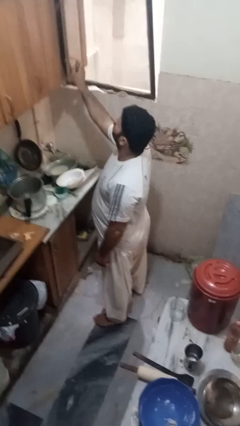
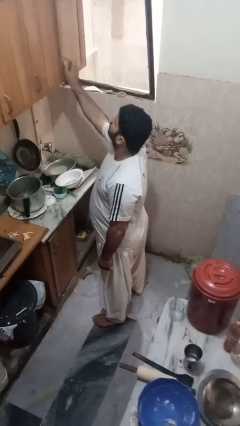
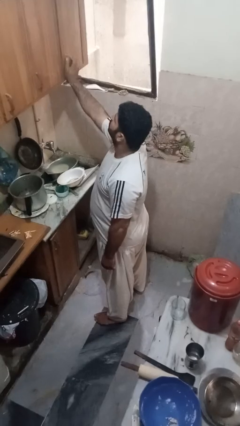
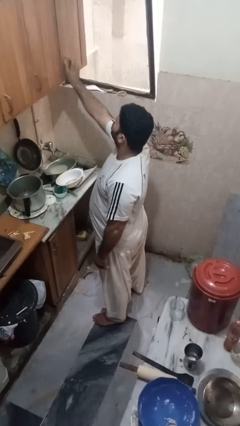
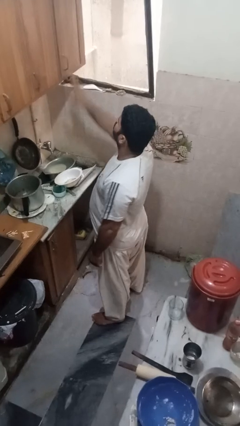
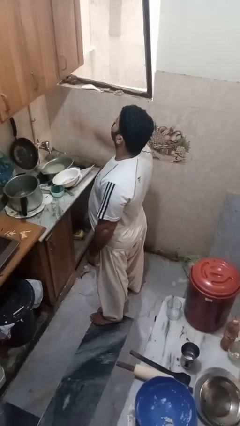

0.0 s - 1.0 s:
person closes cabinet

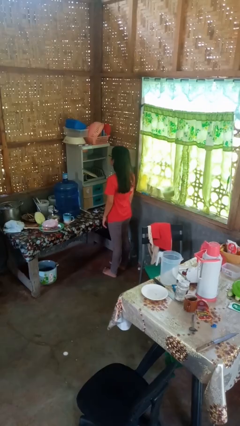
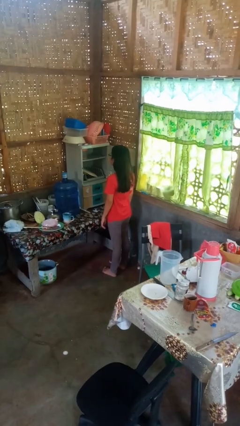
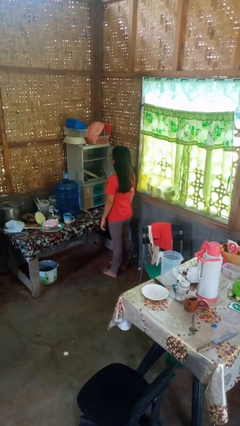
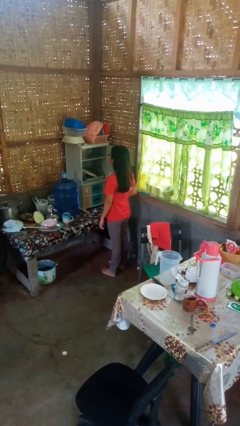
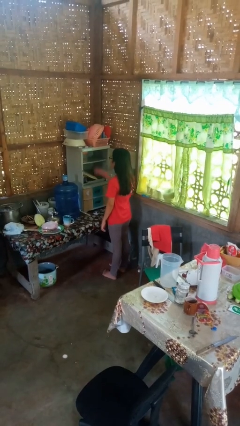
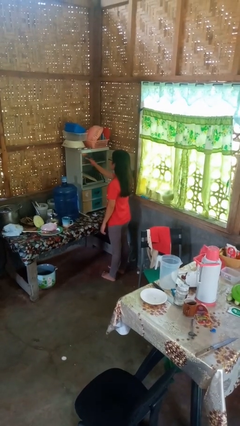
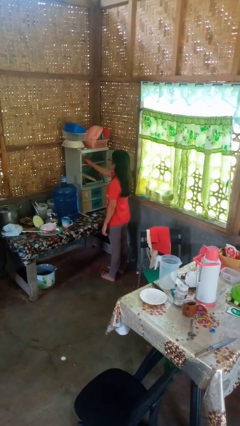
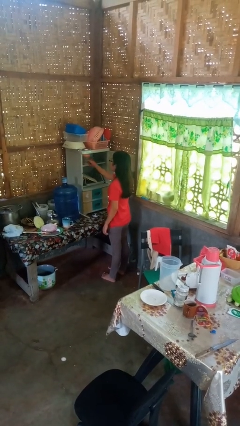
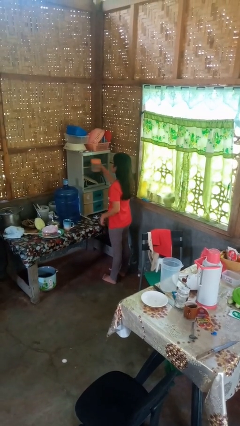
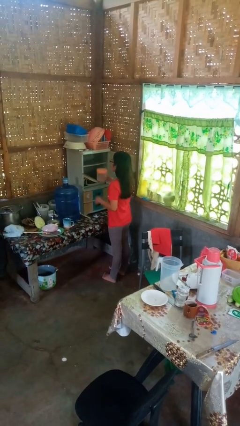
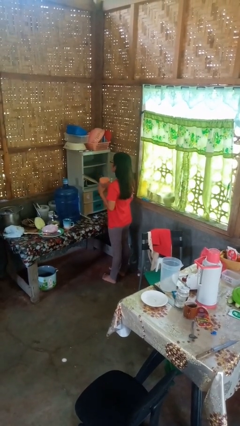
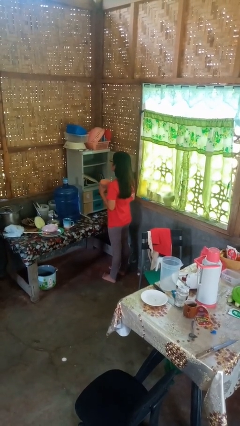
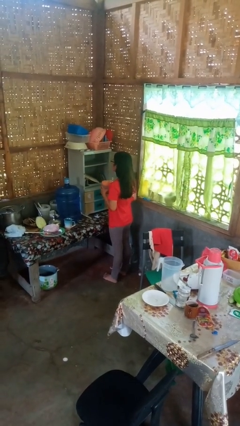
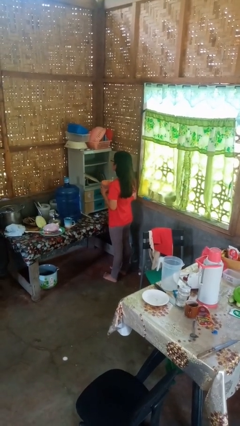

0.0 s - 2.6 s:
person picks up object from cabinet

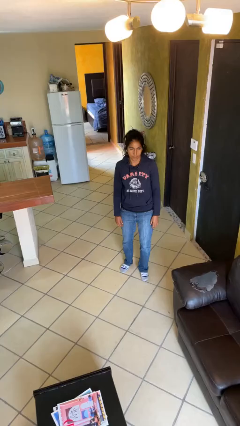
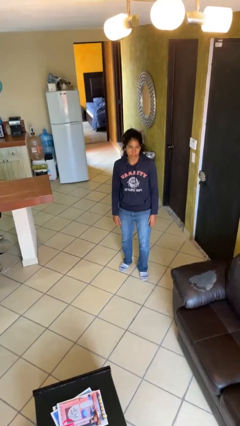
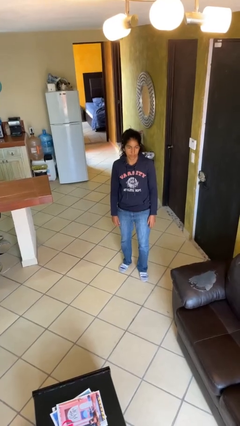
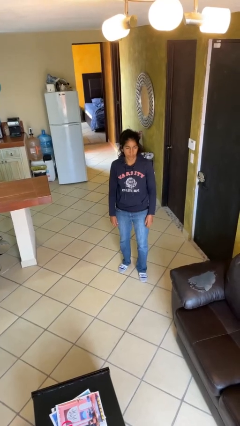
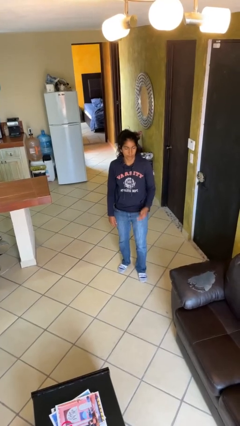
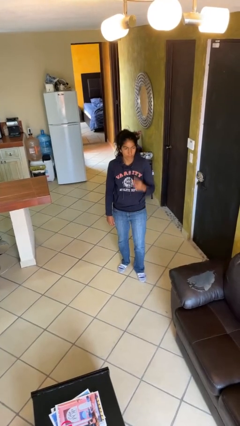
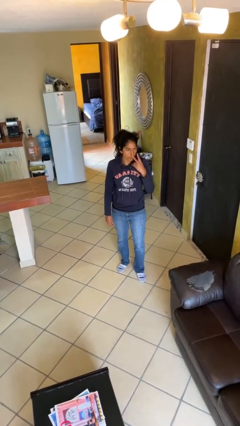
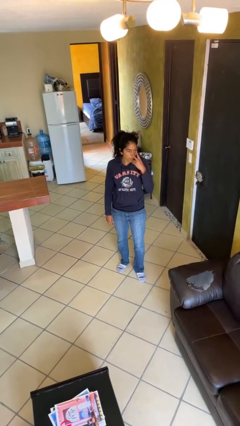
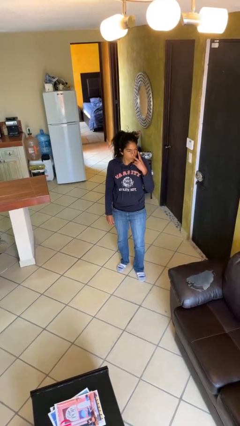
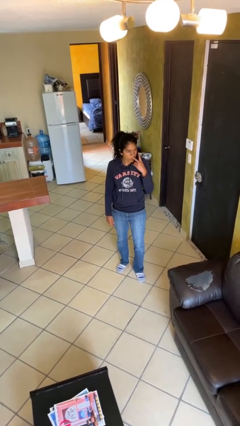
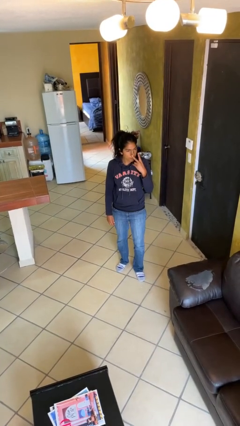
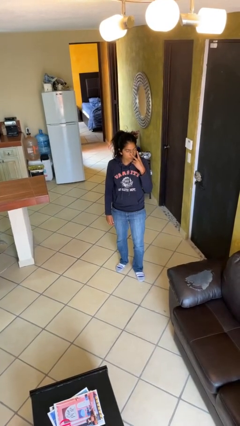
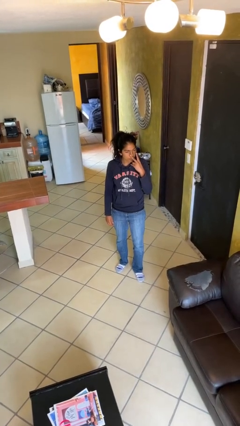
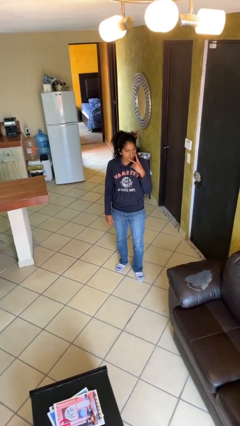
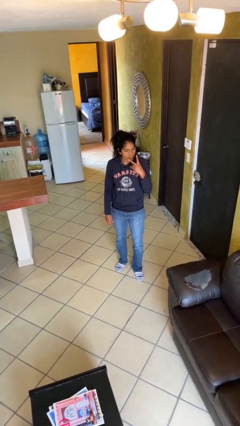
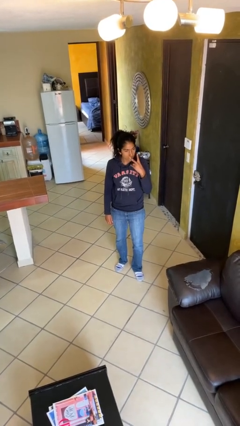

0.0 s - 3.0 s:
person gestures watch closely

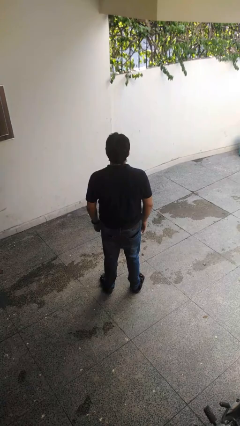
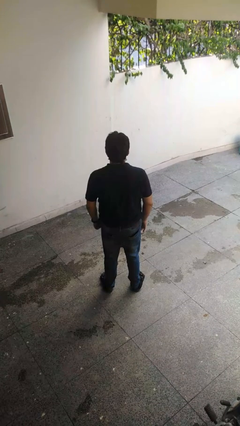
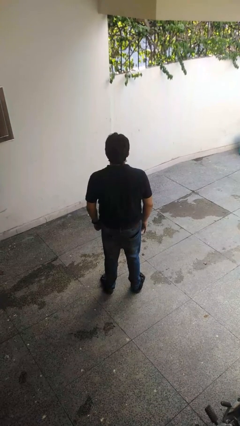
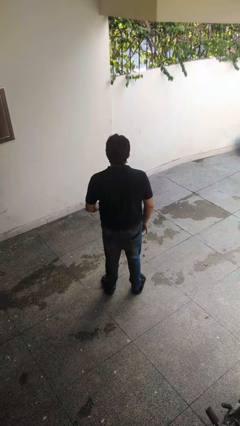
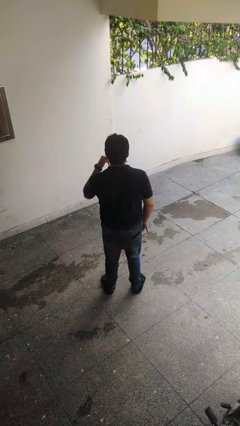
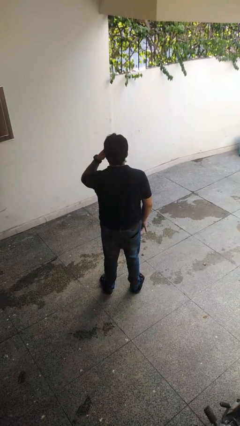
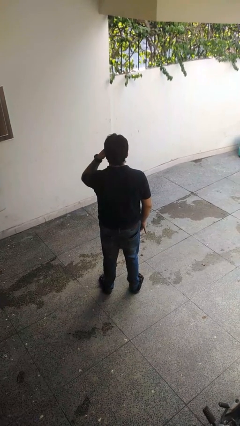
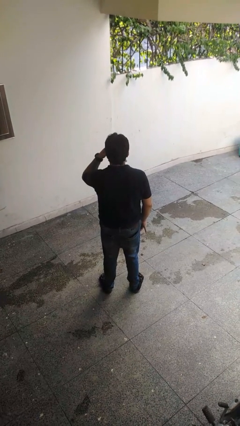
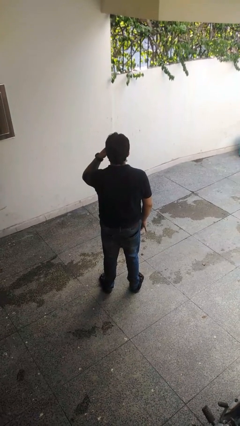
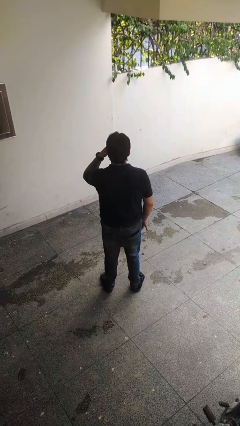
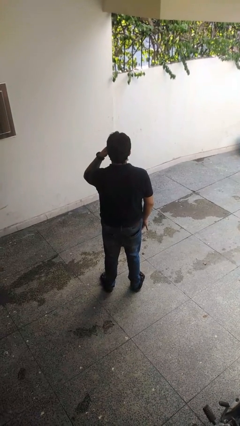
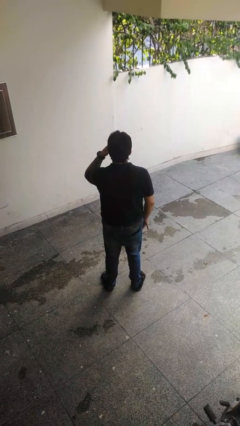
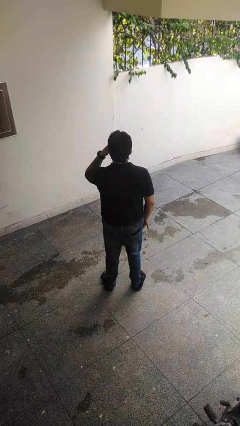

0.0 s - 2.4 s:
person gestures call me

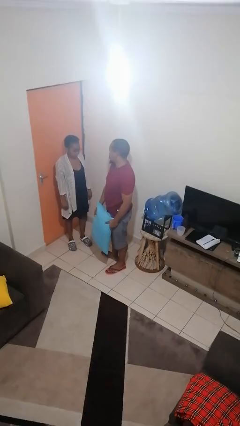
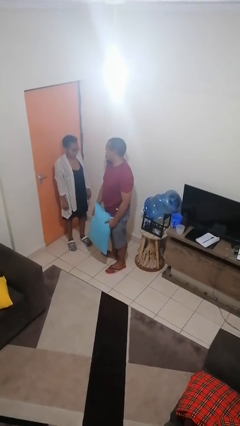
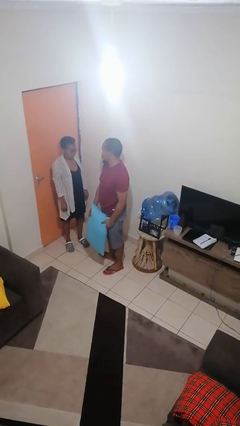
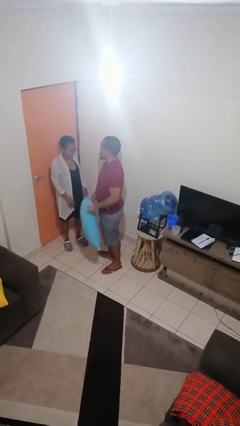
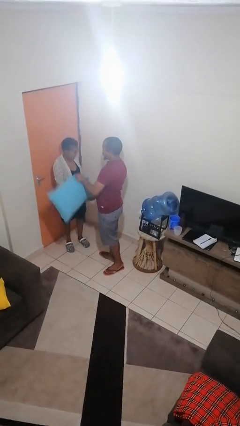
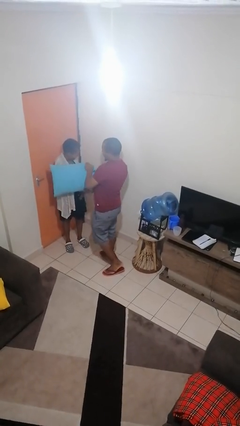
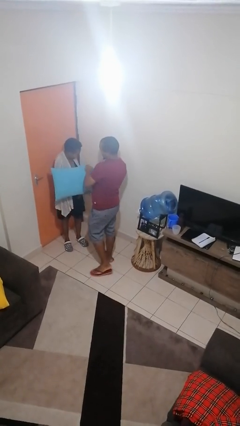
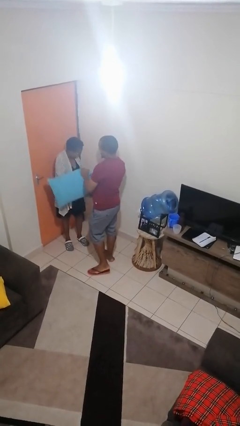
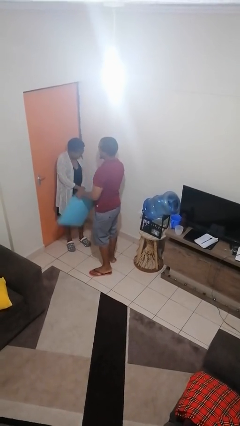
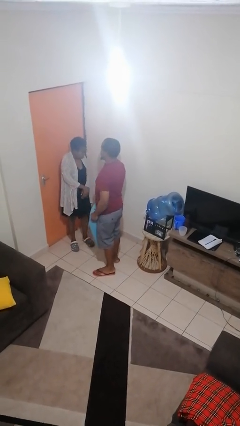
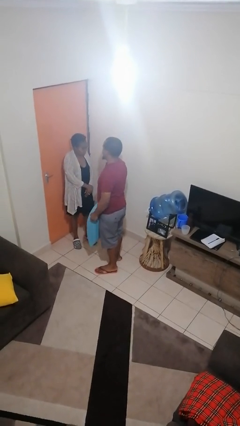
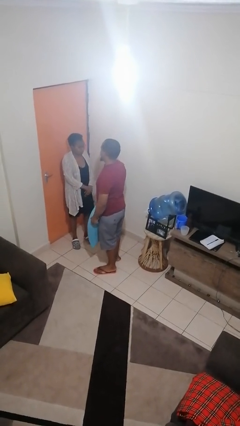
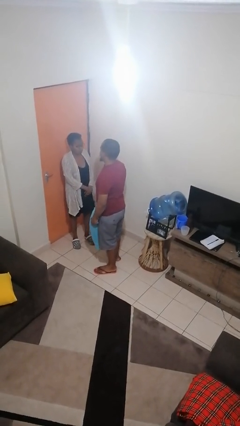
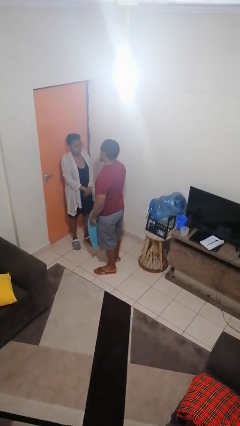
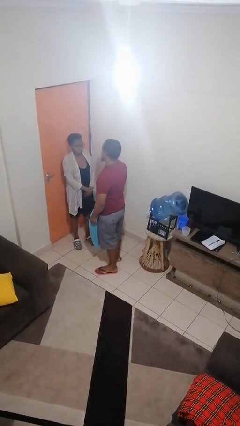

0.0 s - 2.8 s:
person hits person with pillow

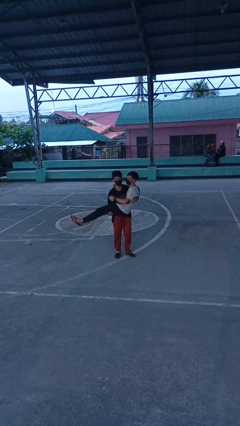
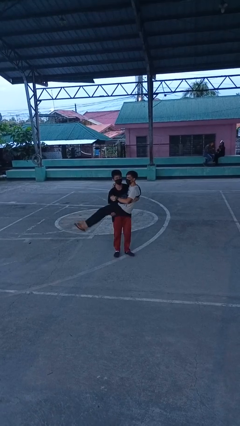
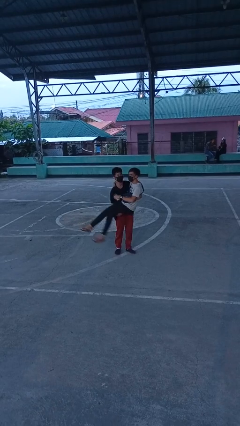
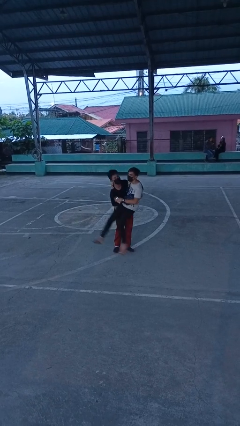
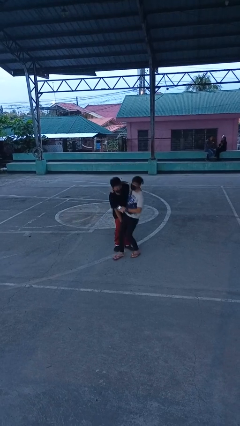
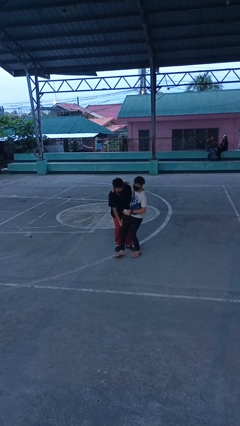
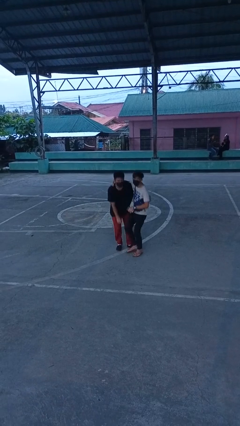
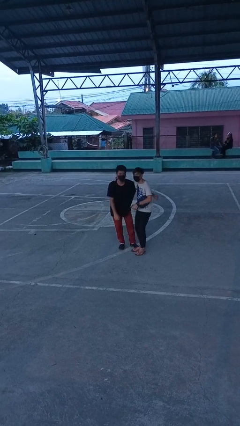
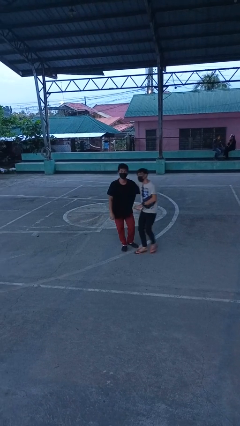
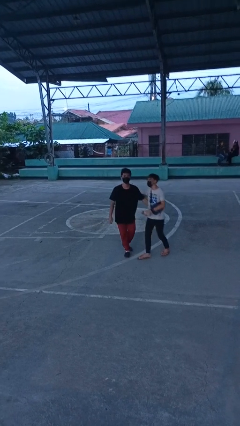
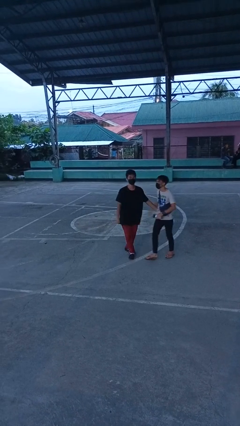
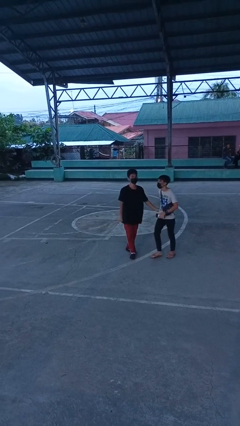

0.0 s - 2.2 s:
person puts down person

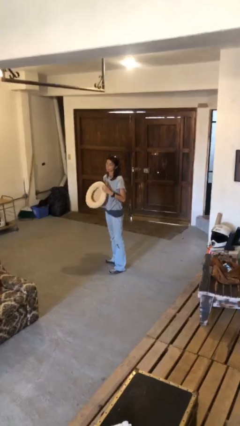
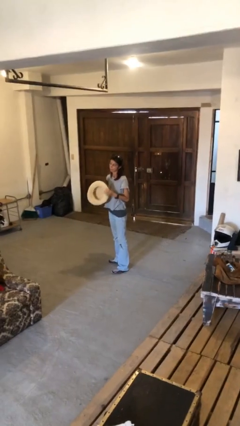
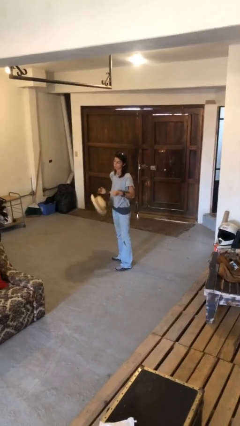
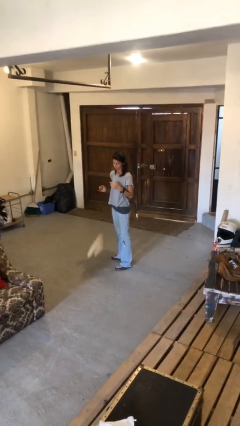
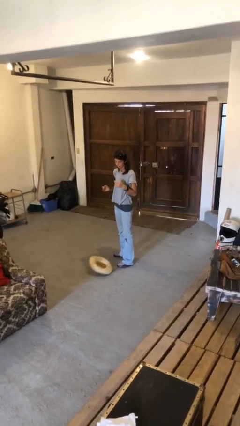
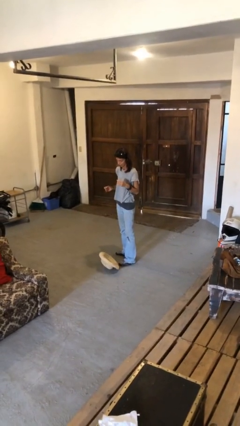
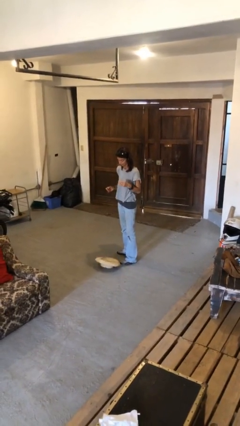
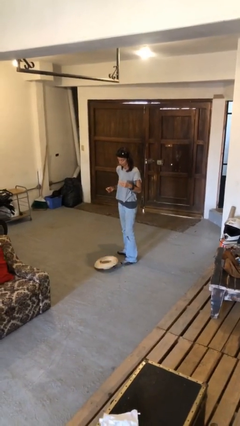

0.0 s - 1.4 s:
person drops object

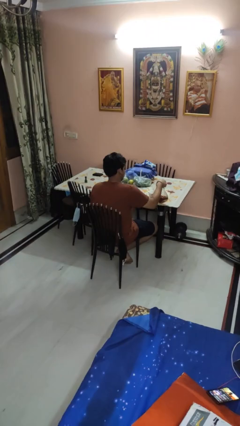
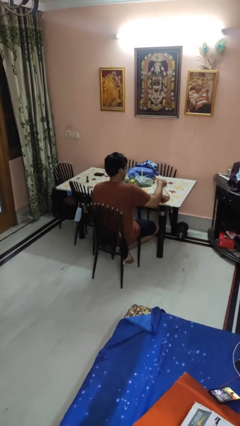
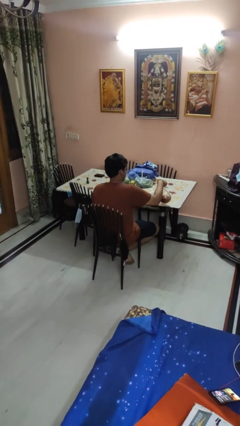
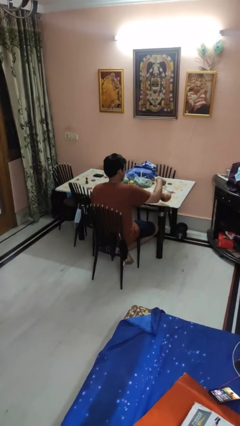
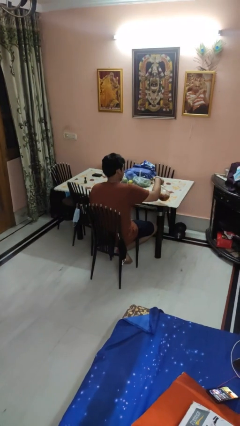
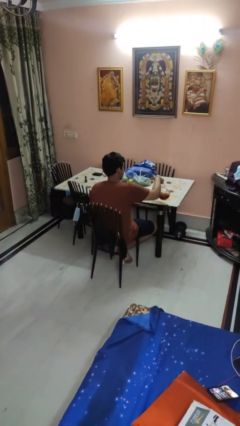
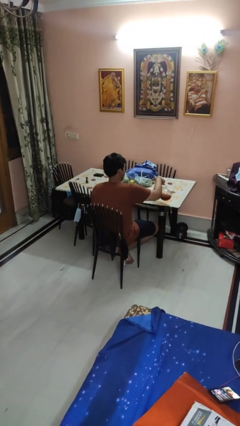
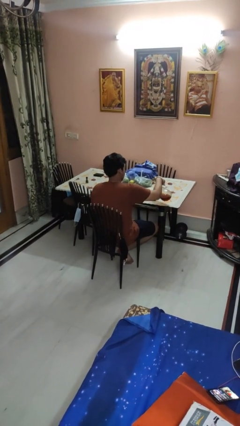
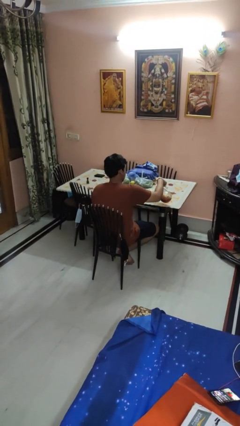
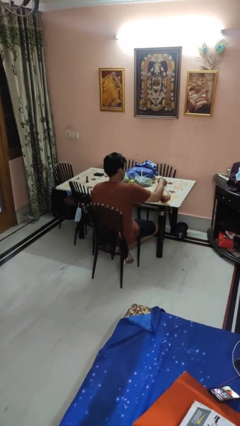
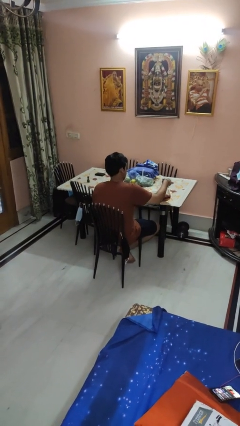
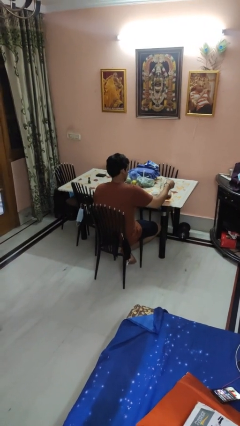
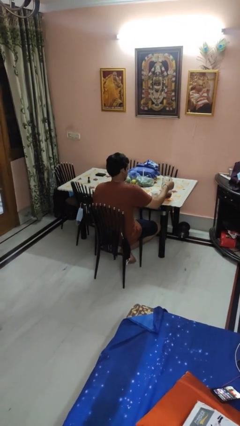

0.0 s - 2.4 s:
person pours coffee into mug
